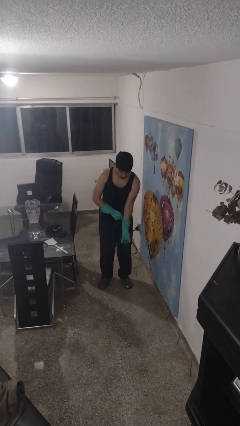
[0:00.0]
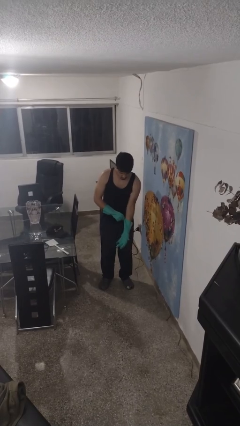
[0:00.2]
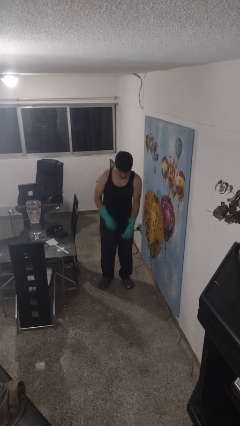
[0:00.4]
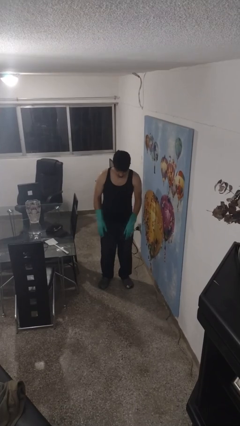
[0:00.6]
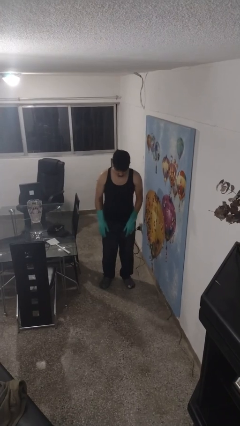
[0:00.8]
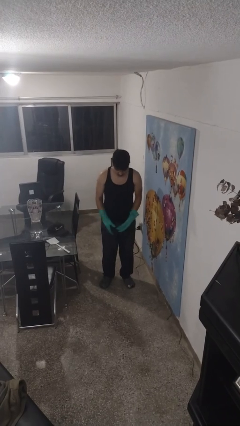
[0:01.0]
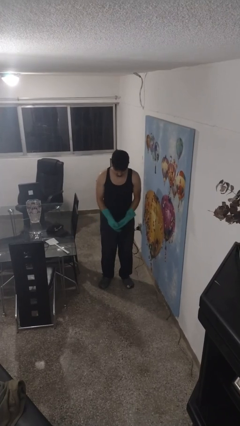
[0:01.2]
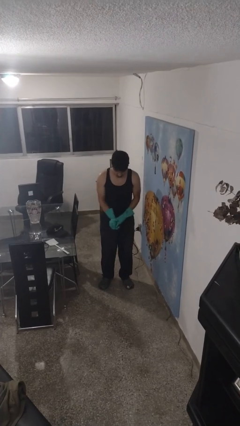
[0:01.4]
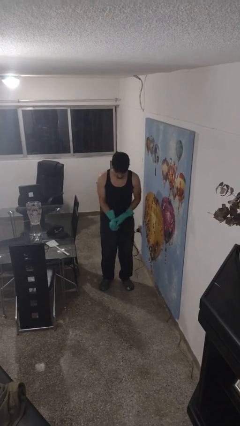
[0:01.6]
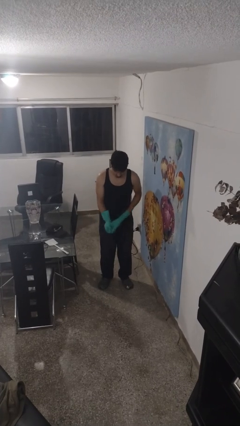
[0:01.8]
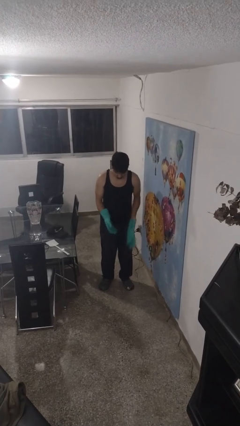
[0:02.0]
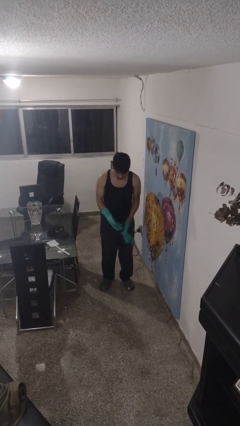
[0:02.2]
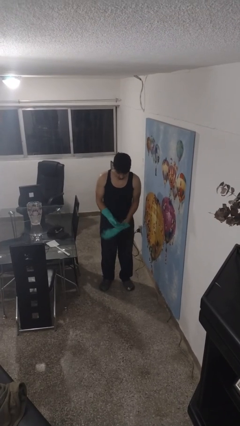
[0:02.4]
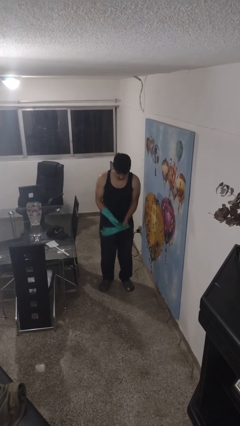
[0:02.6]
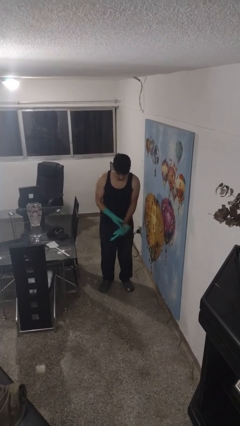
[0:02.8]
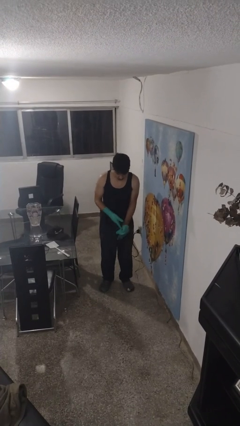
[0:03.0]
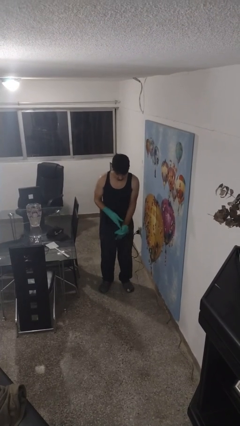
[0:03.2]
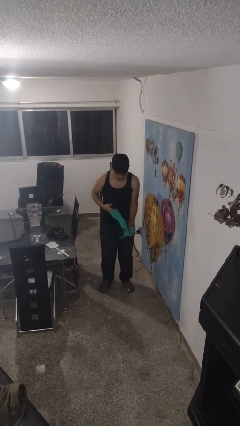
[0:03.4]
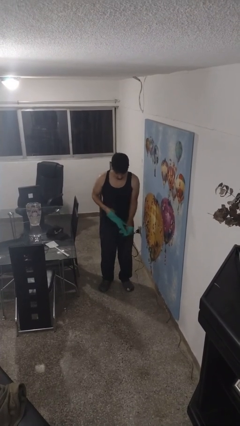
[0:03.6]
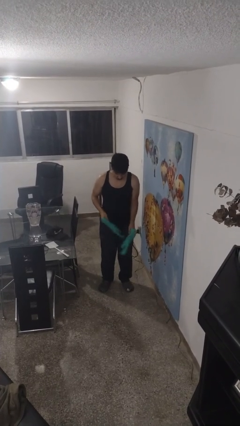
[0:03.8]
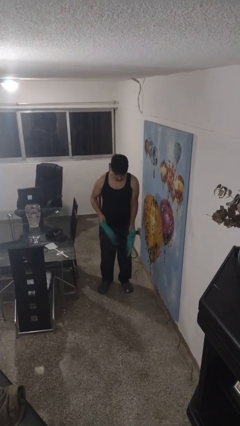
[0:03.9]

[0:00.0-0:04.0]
person takes off gloves

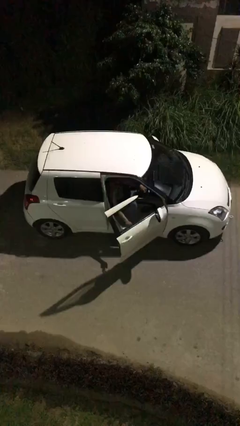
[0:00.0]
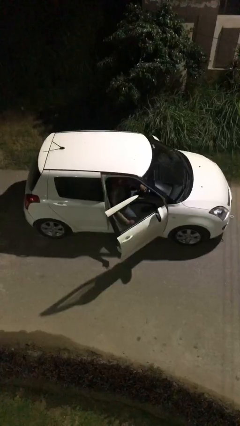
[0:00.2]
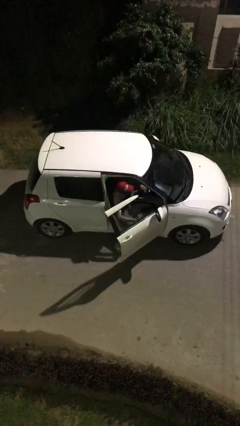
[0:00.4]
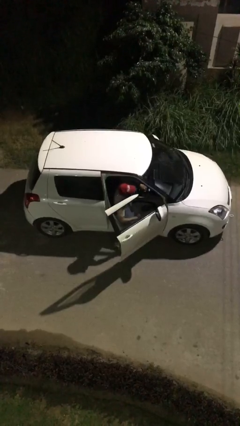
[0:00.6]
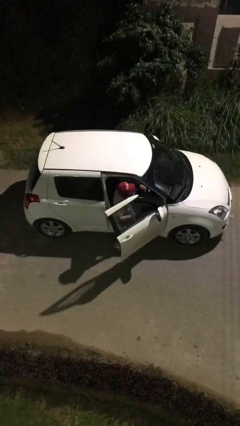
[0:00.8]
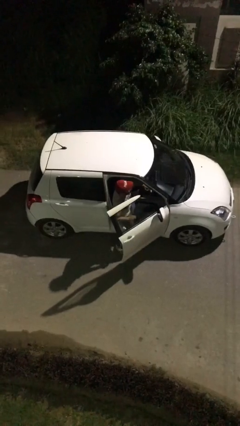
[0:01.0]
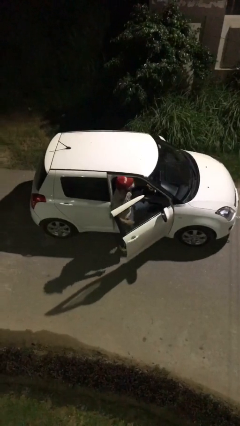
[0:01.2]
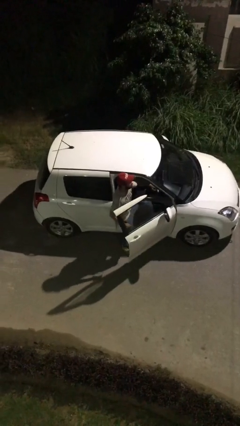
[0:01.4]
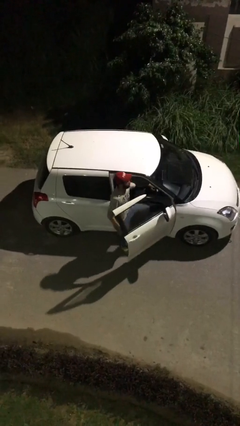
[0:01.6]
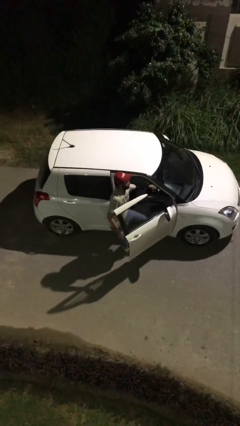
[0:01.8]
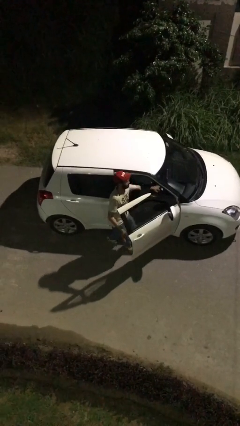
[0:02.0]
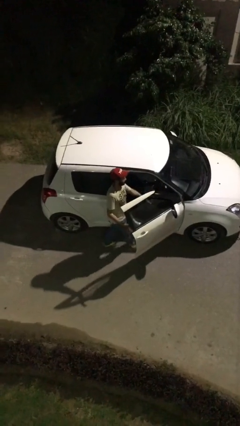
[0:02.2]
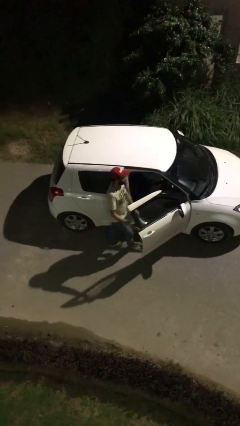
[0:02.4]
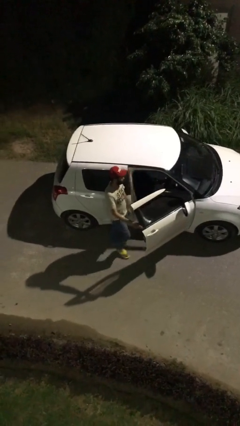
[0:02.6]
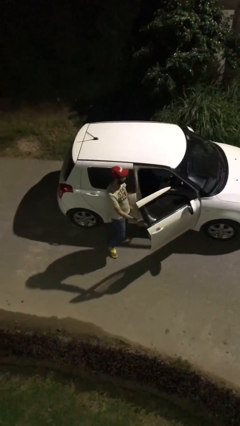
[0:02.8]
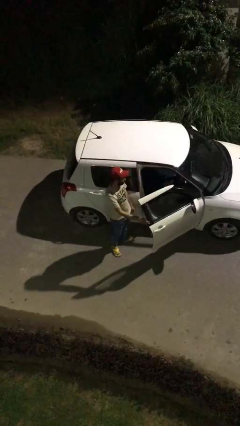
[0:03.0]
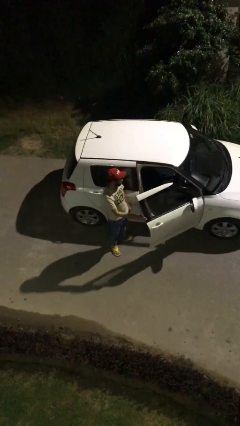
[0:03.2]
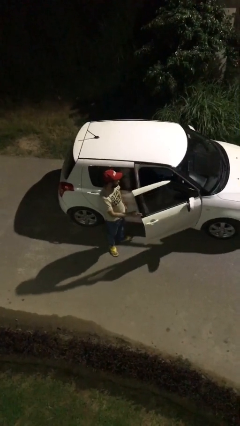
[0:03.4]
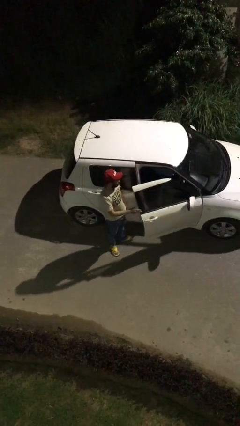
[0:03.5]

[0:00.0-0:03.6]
person exits car

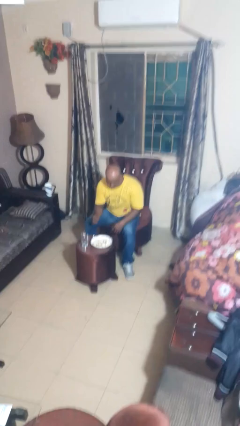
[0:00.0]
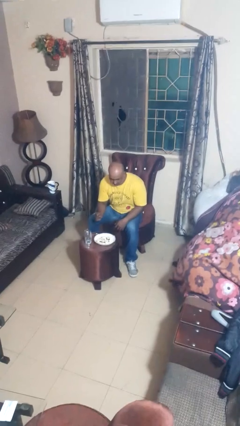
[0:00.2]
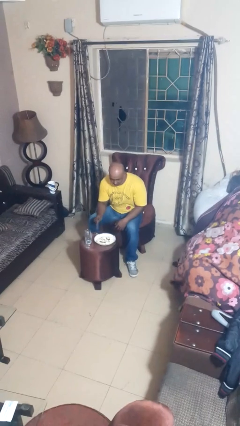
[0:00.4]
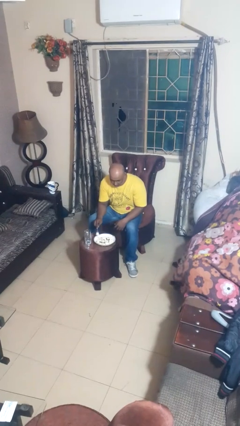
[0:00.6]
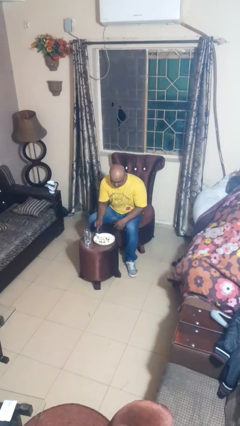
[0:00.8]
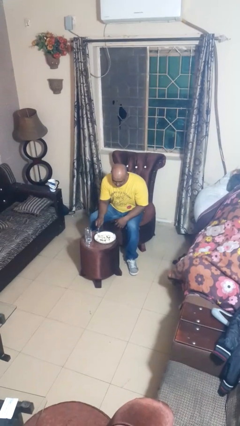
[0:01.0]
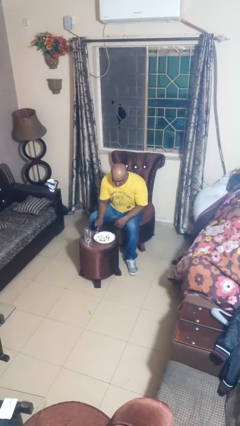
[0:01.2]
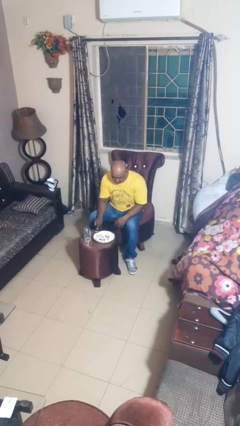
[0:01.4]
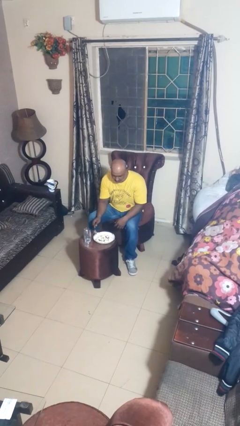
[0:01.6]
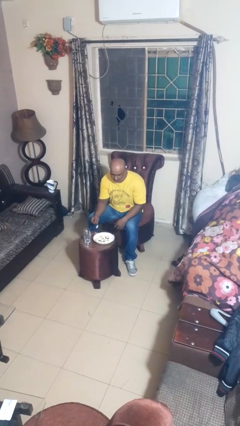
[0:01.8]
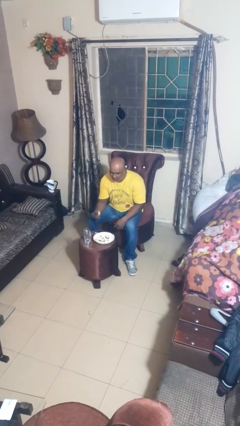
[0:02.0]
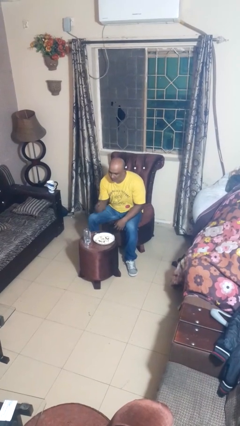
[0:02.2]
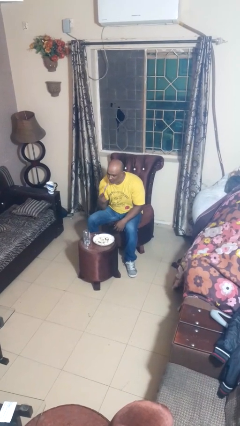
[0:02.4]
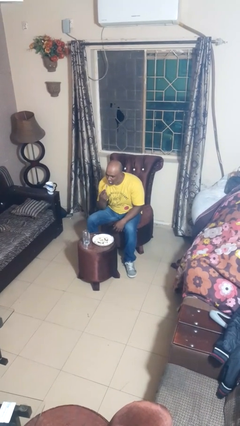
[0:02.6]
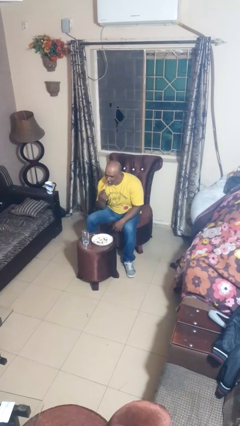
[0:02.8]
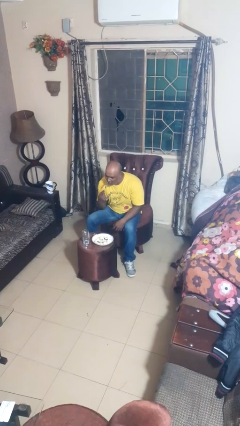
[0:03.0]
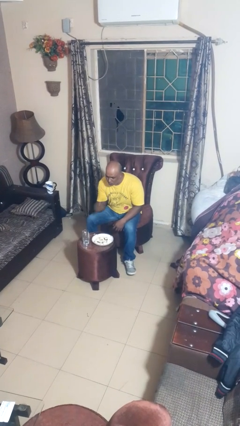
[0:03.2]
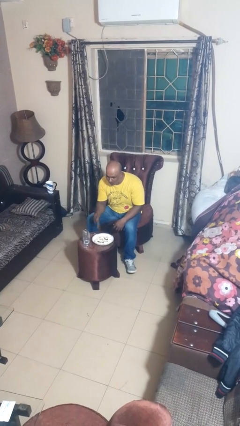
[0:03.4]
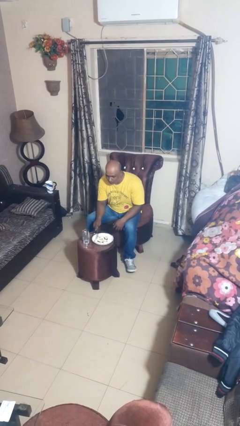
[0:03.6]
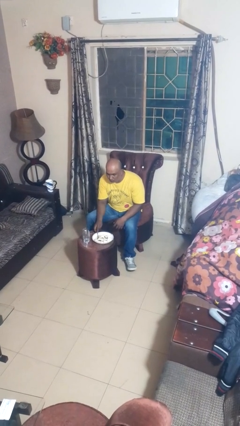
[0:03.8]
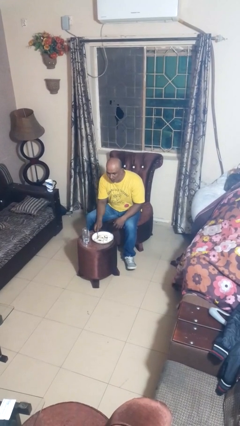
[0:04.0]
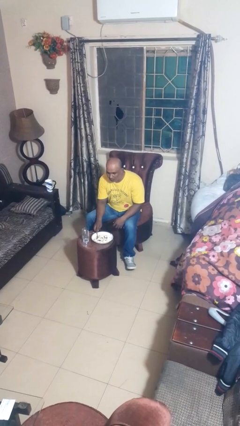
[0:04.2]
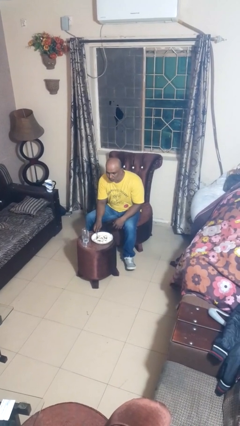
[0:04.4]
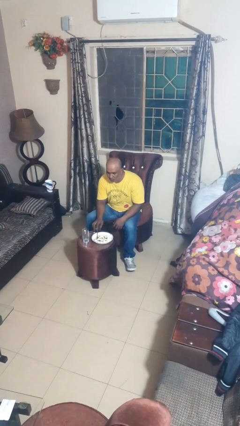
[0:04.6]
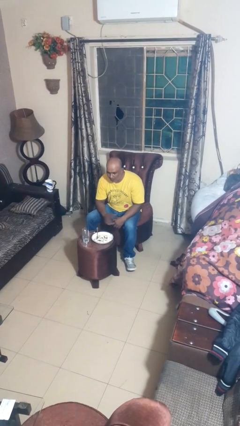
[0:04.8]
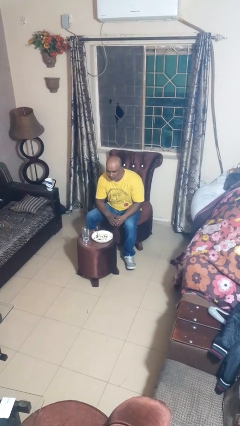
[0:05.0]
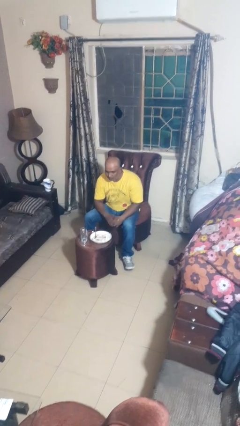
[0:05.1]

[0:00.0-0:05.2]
person eats with utensil

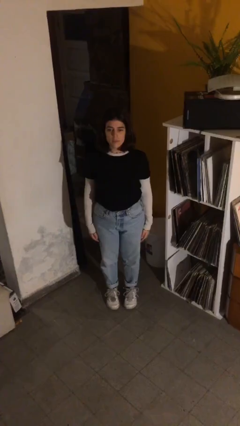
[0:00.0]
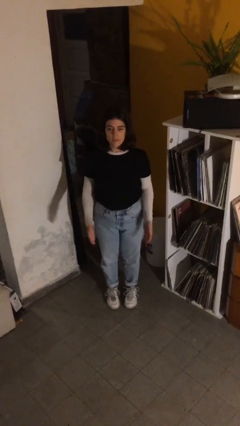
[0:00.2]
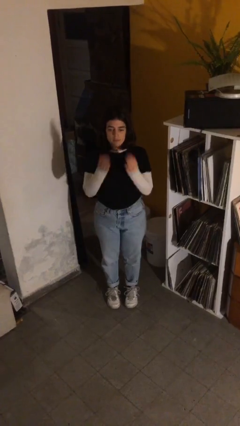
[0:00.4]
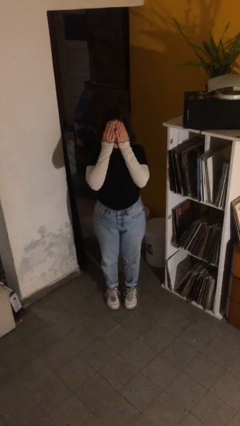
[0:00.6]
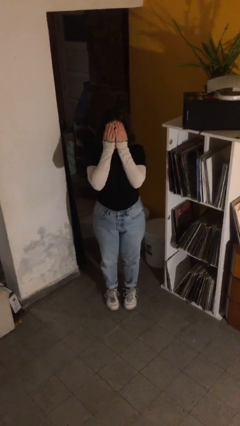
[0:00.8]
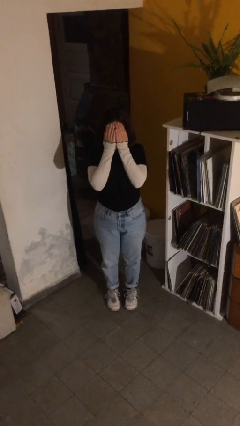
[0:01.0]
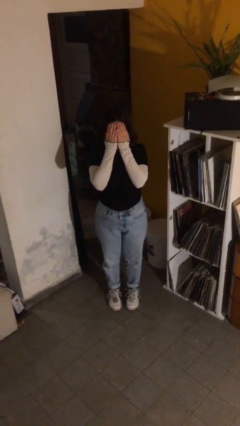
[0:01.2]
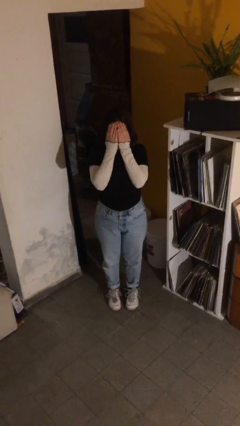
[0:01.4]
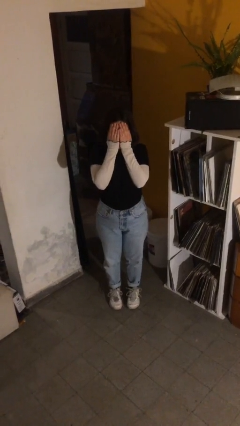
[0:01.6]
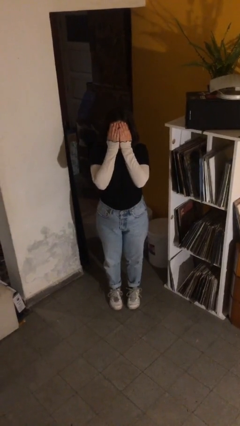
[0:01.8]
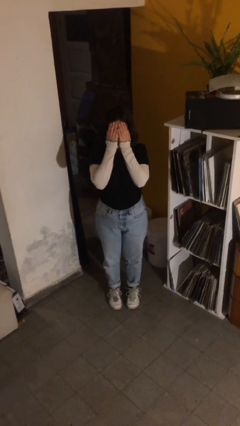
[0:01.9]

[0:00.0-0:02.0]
person covers face with hands

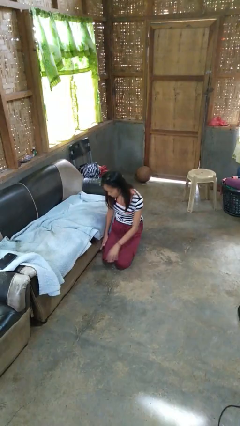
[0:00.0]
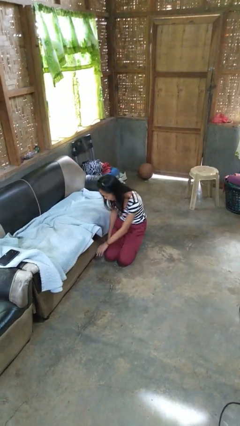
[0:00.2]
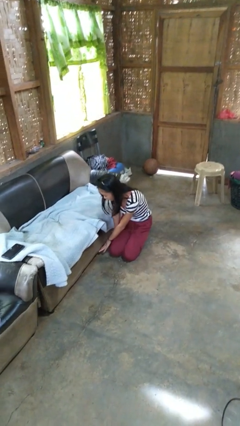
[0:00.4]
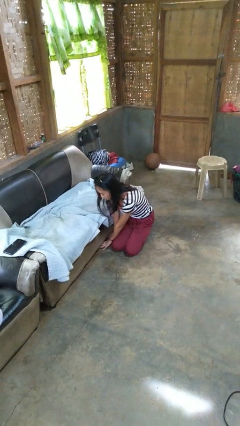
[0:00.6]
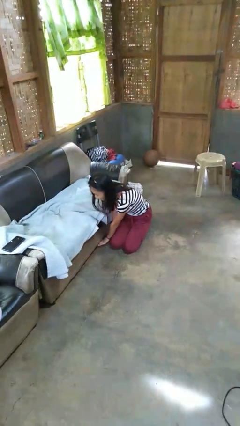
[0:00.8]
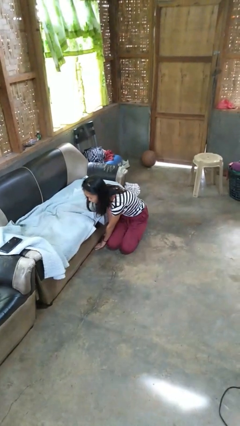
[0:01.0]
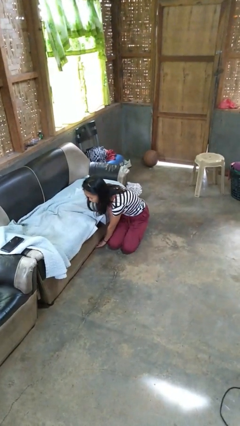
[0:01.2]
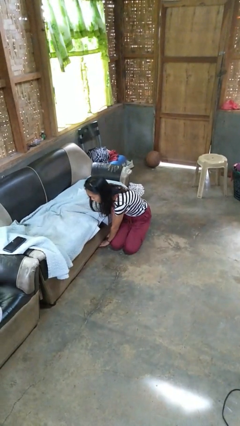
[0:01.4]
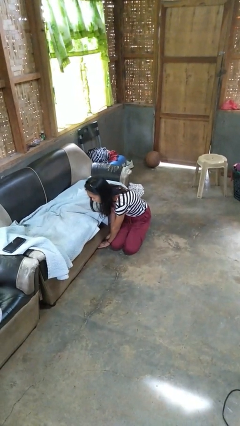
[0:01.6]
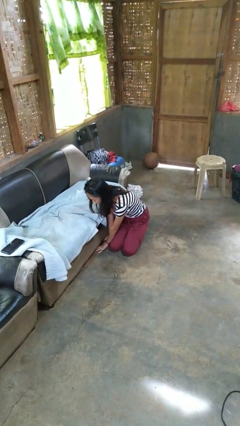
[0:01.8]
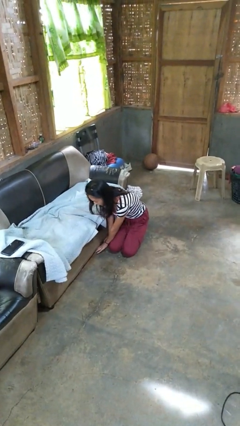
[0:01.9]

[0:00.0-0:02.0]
person searches under couch

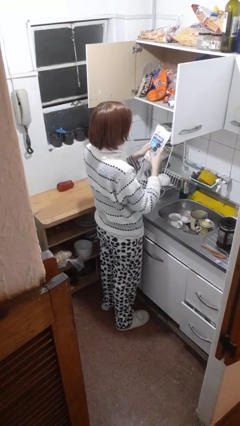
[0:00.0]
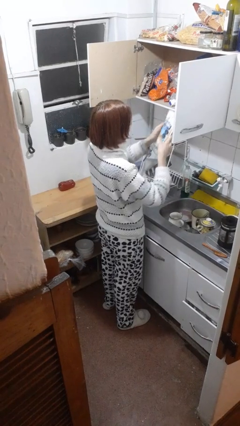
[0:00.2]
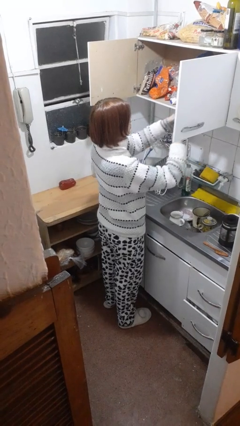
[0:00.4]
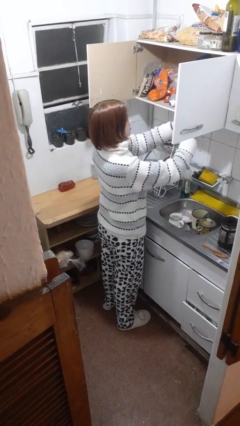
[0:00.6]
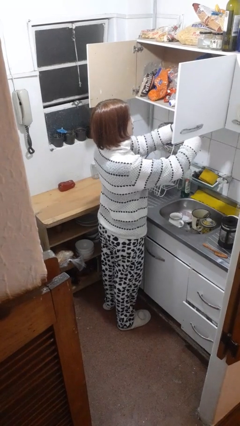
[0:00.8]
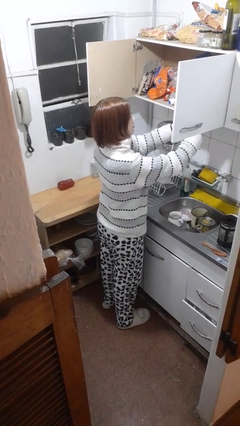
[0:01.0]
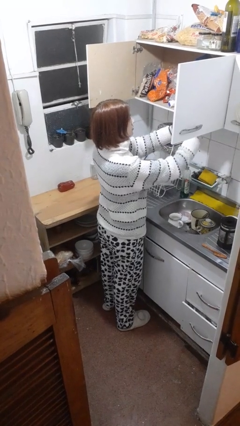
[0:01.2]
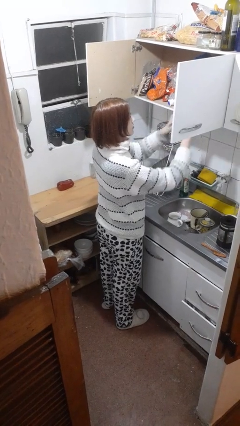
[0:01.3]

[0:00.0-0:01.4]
person puts object in cabinet
